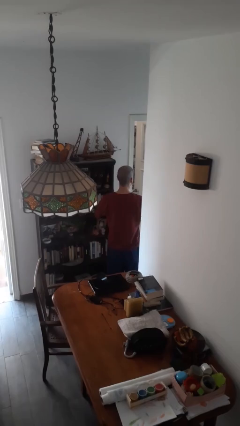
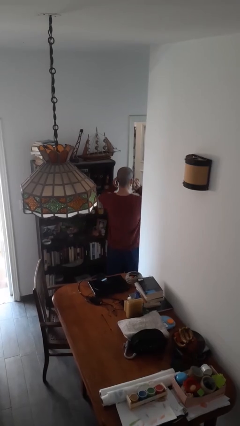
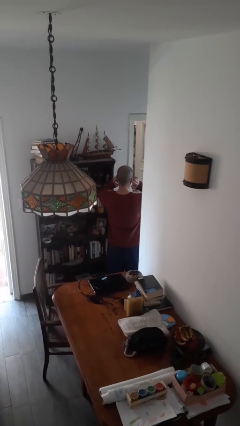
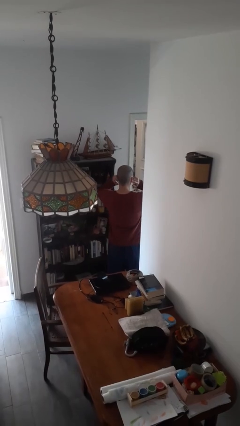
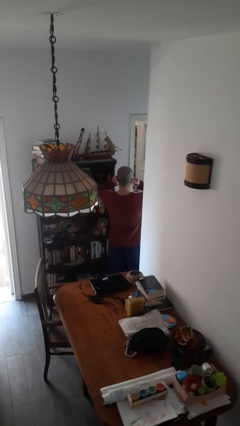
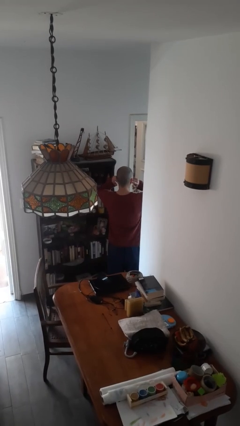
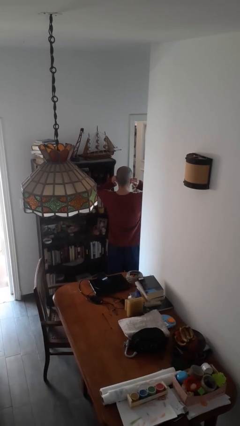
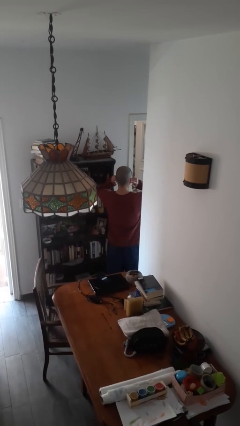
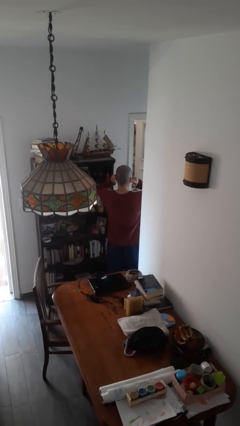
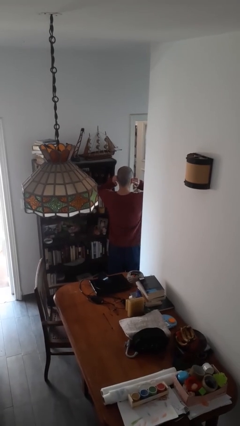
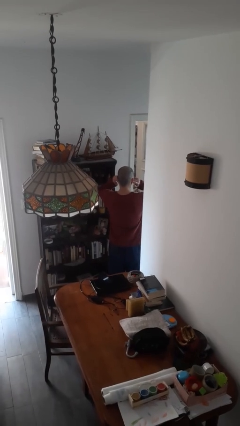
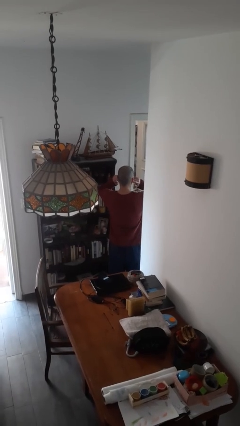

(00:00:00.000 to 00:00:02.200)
person puts fingers in ear

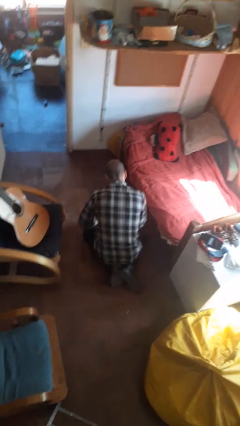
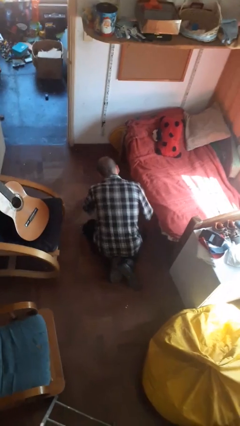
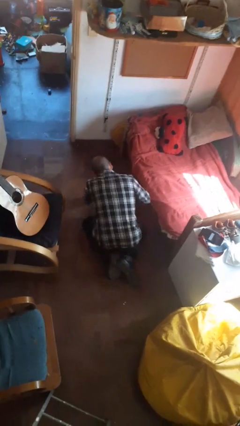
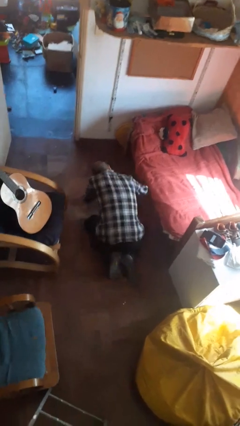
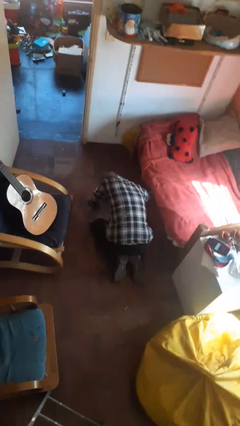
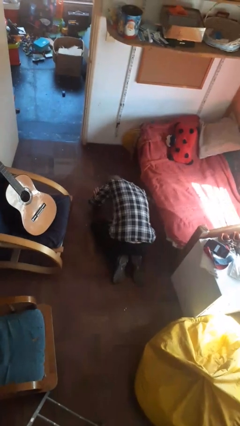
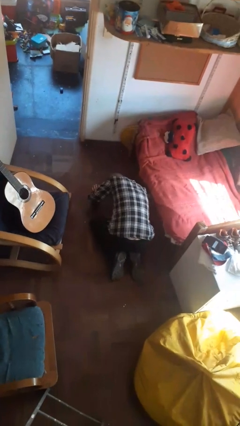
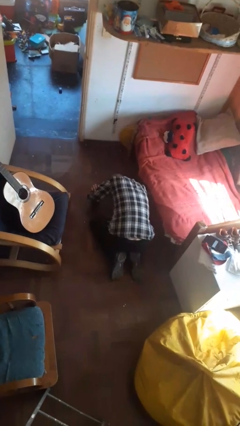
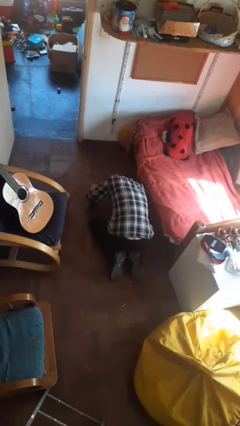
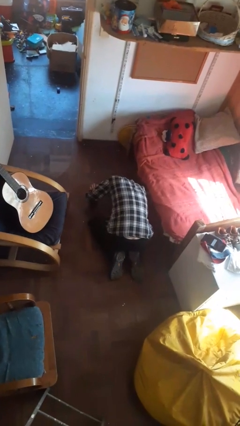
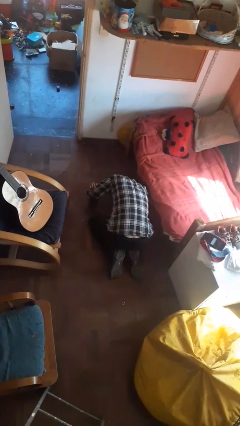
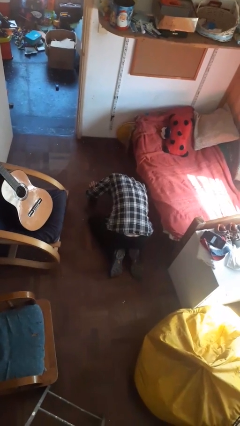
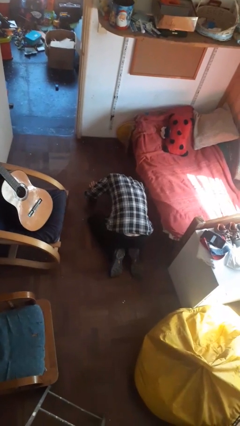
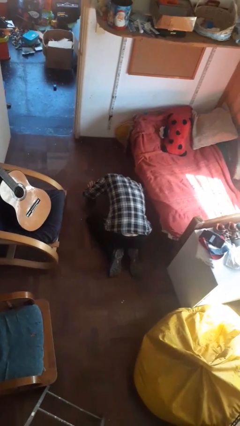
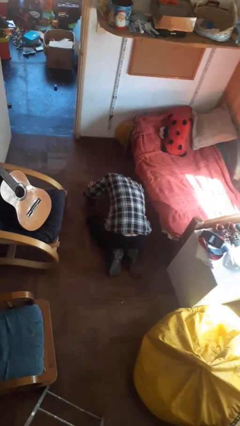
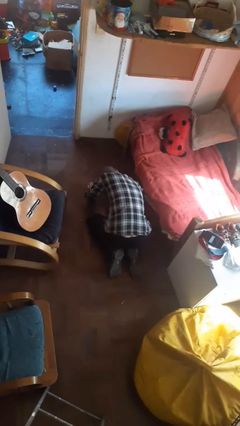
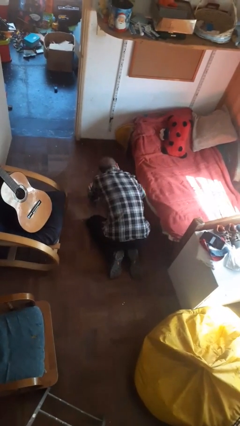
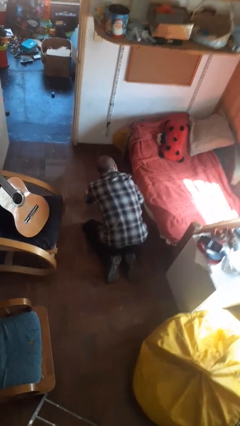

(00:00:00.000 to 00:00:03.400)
person searches under bed

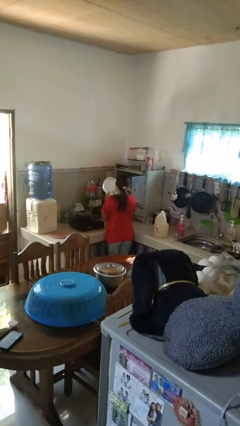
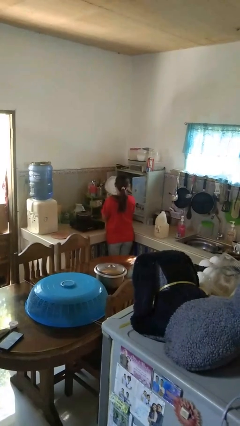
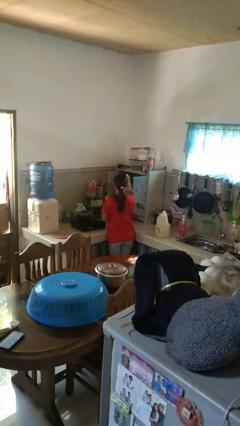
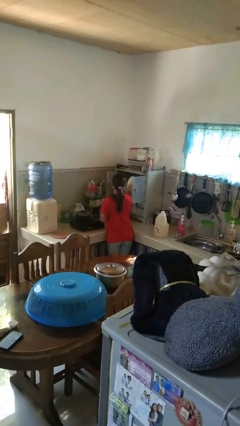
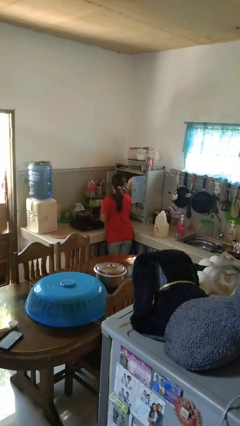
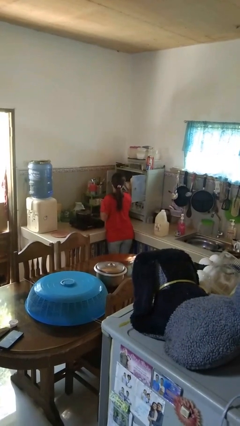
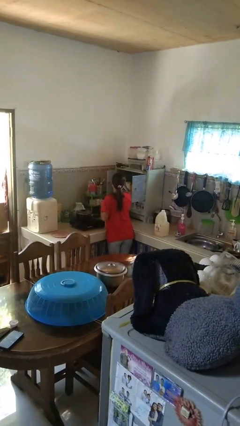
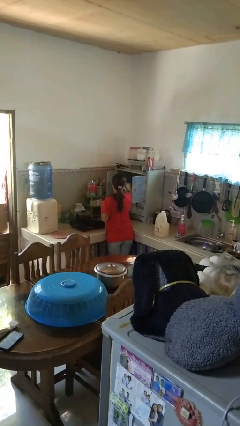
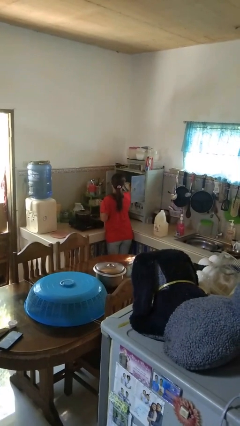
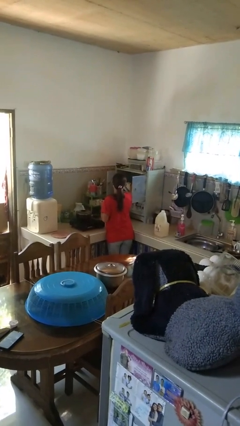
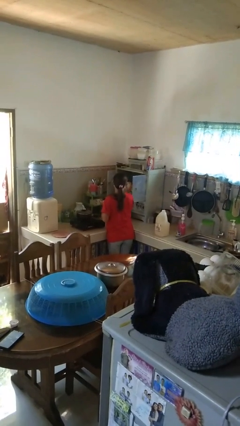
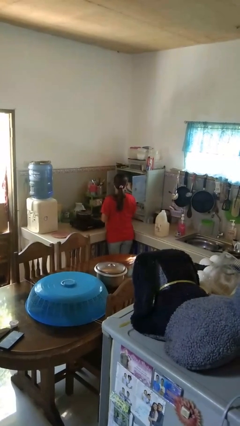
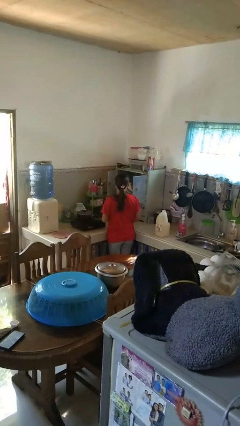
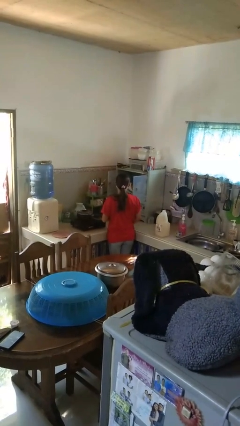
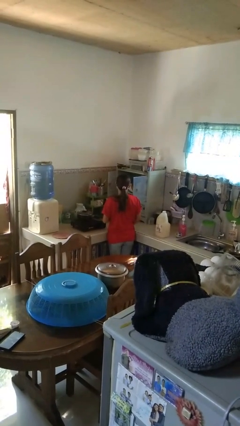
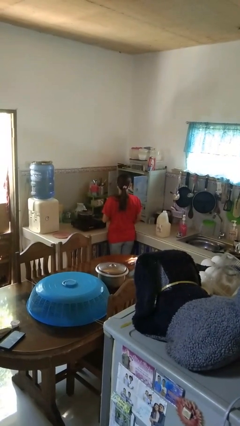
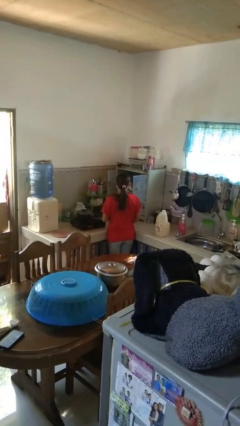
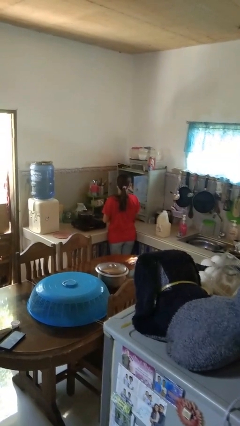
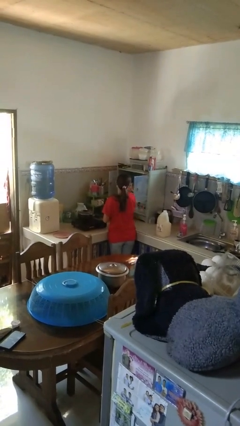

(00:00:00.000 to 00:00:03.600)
person puts object in cabinet

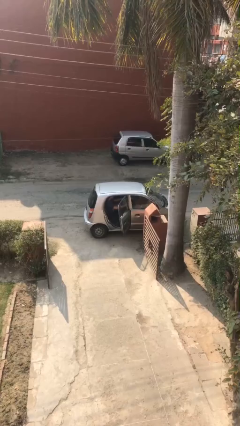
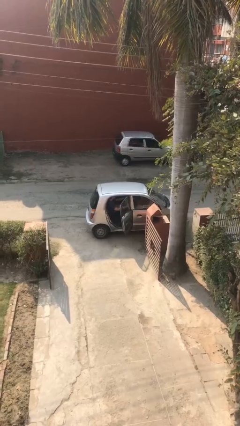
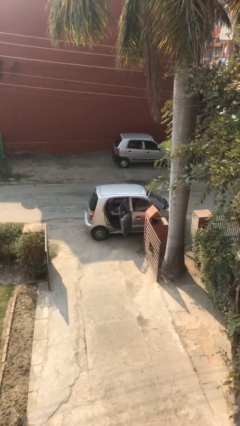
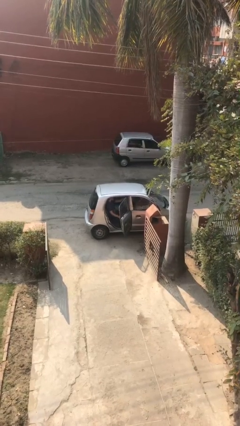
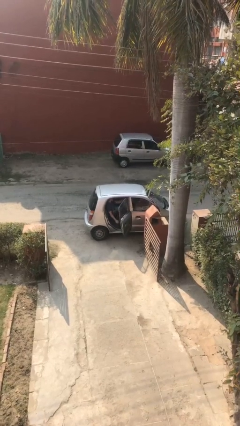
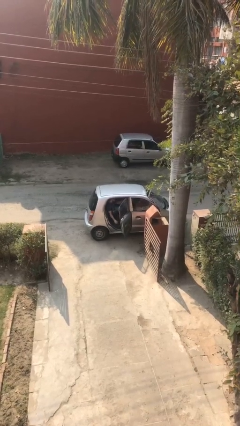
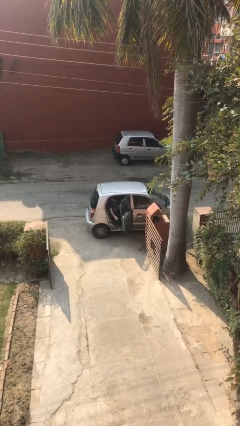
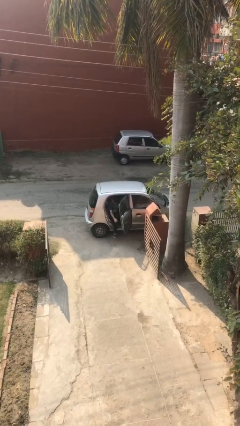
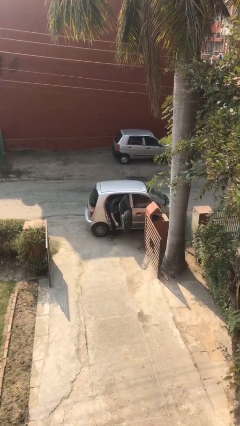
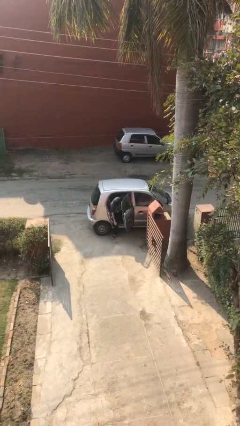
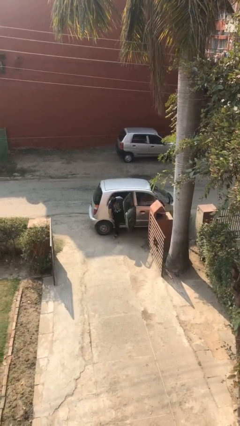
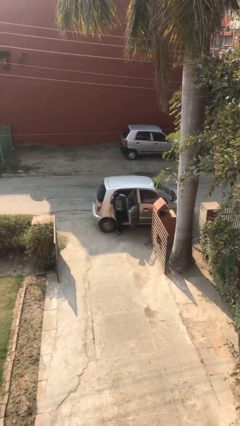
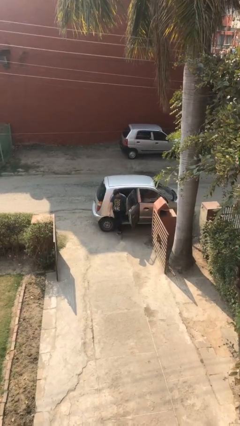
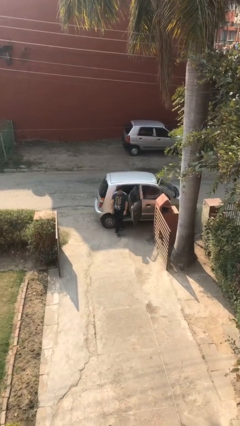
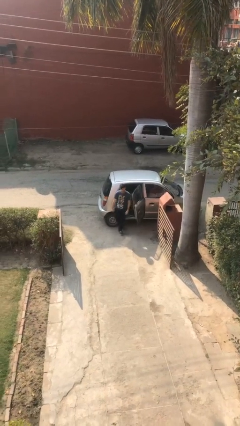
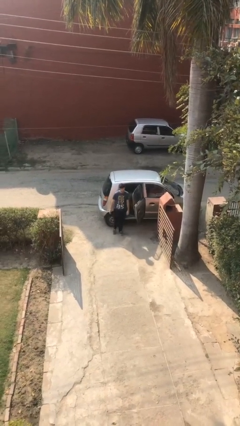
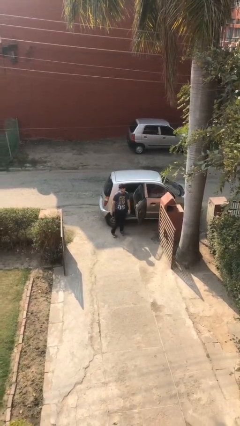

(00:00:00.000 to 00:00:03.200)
person exits car

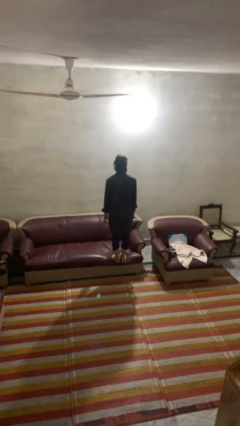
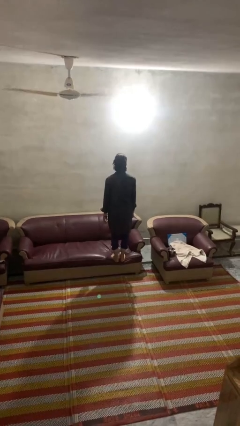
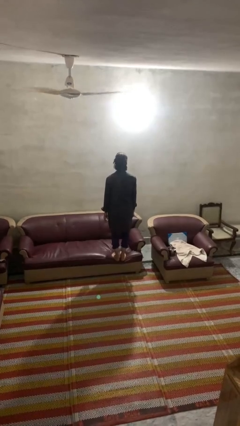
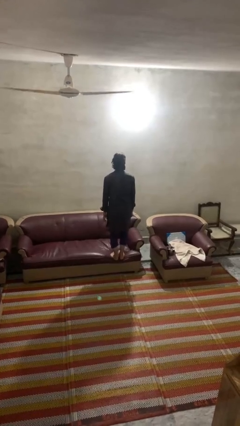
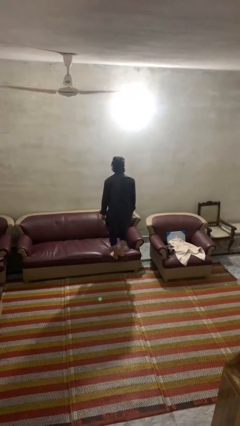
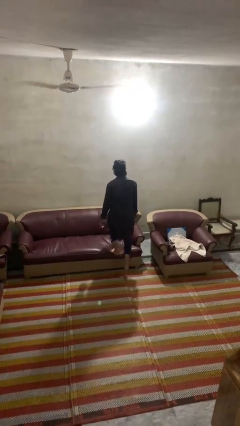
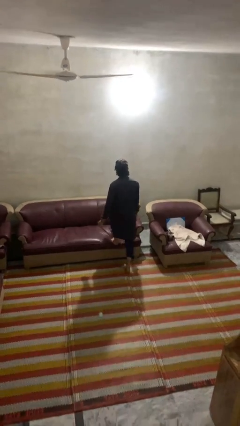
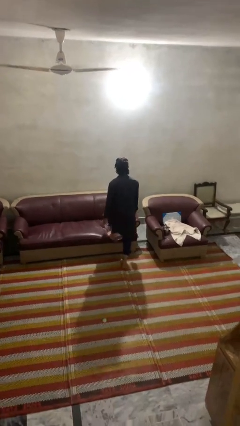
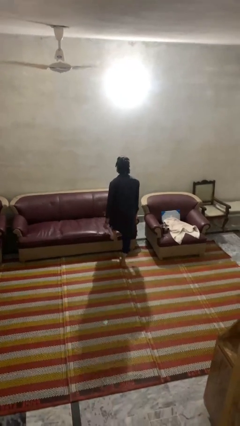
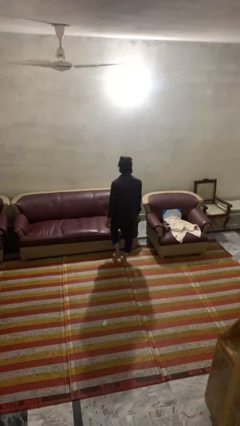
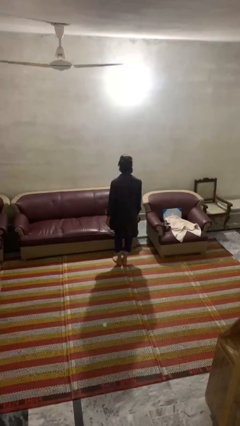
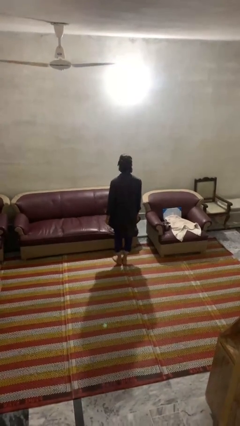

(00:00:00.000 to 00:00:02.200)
person climbs off couch

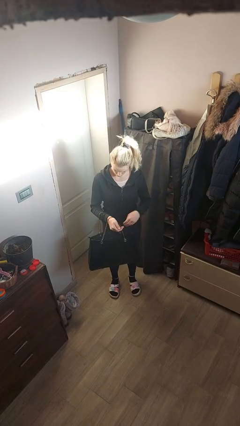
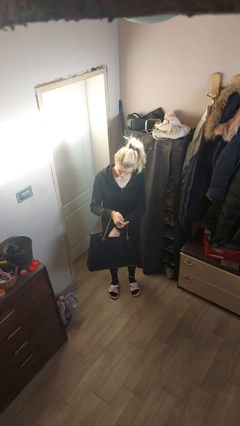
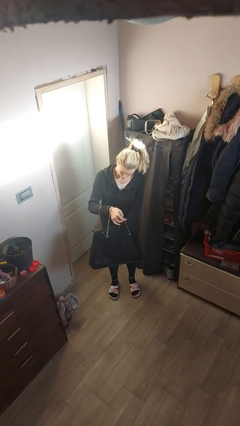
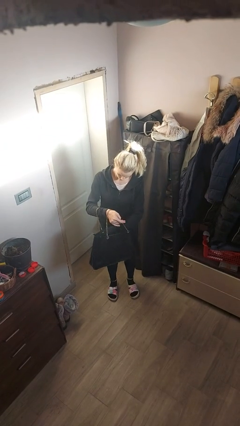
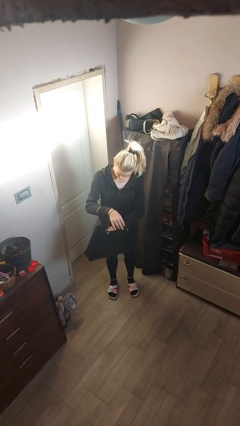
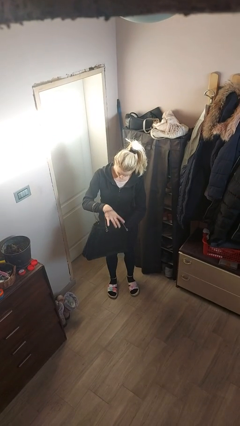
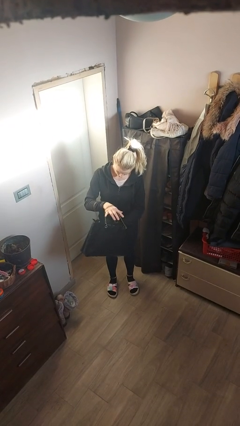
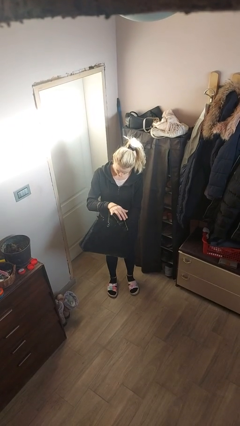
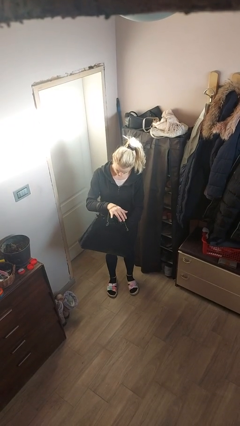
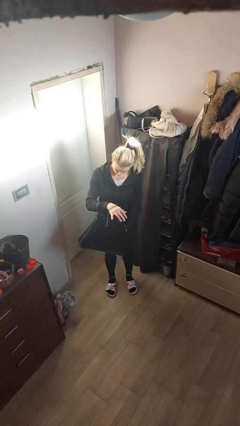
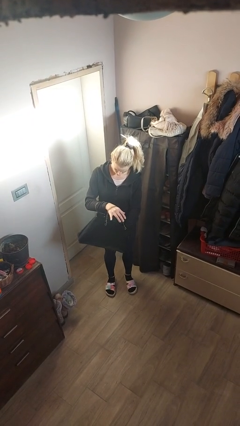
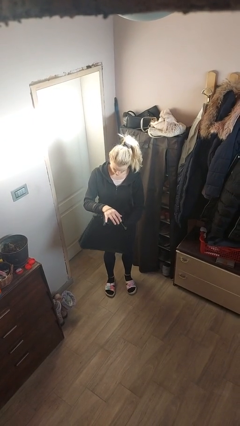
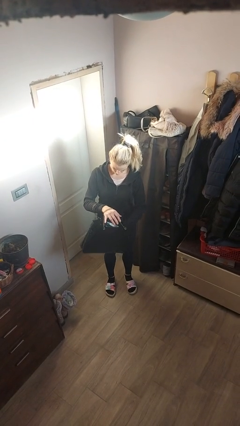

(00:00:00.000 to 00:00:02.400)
person searches in purse

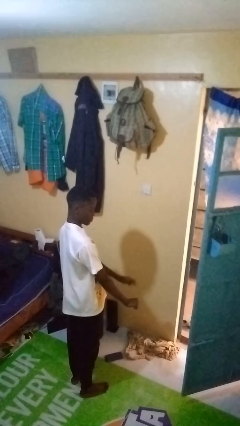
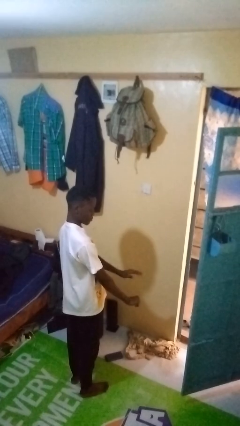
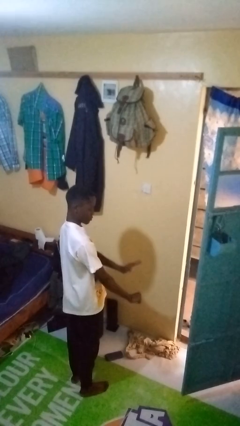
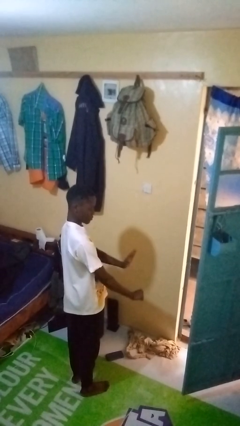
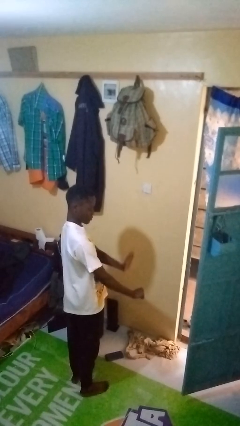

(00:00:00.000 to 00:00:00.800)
person swats bug
